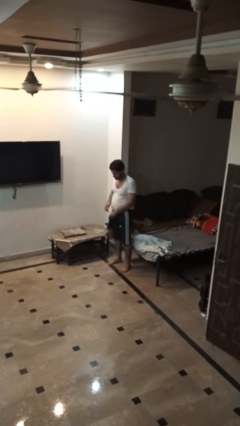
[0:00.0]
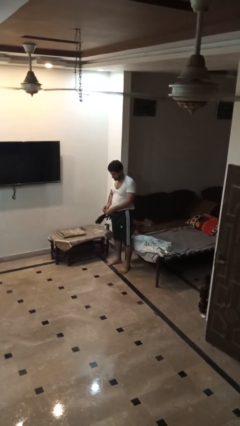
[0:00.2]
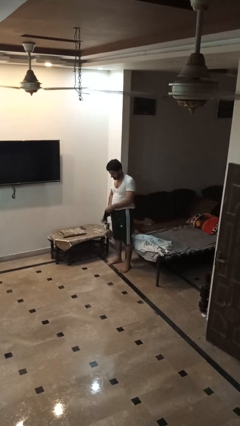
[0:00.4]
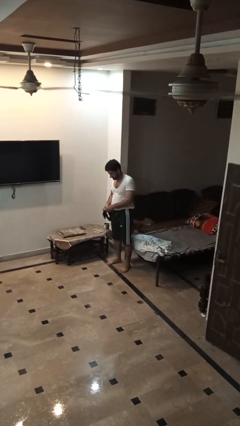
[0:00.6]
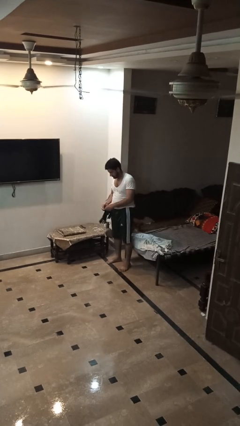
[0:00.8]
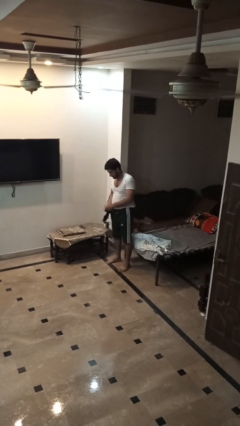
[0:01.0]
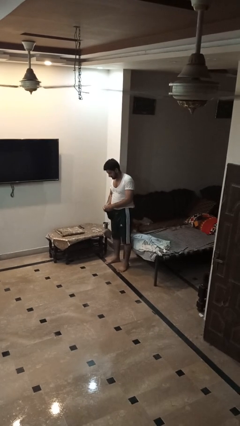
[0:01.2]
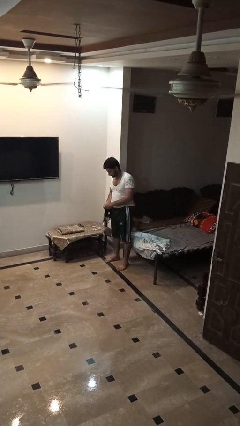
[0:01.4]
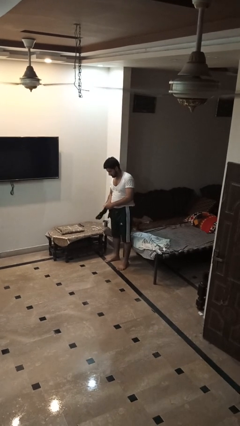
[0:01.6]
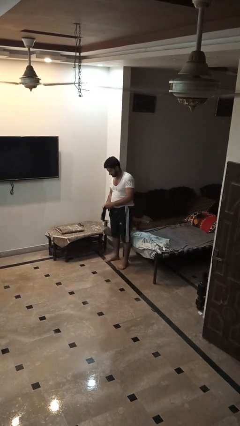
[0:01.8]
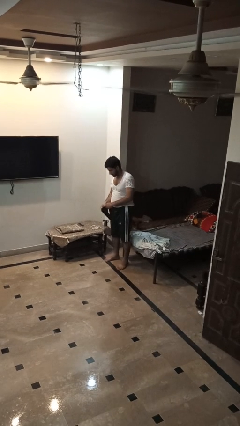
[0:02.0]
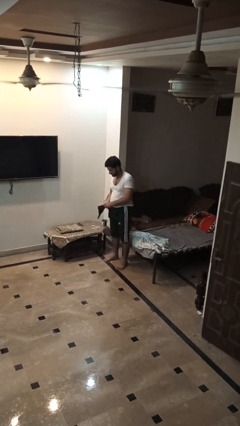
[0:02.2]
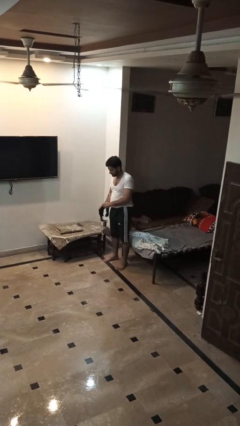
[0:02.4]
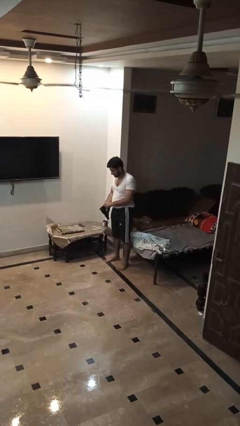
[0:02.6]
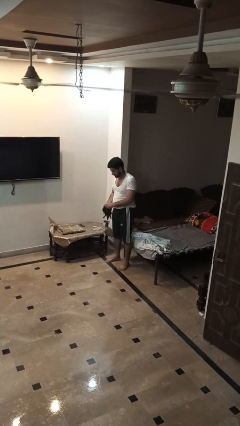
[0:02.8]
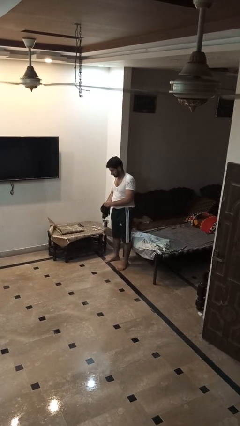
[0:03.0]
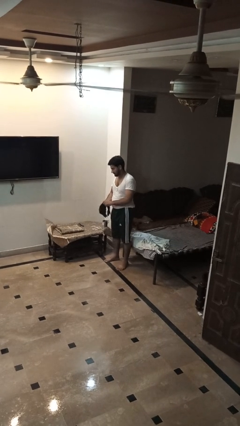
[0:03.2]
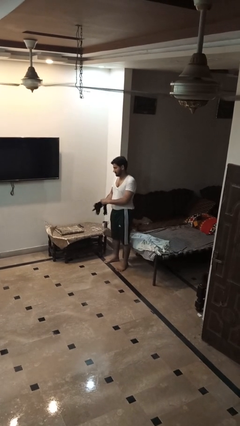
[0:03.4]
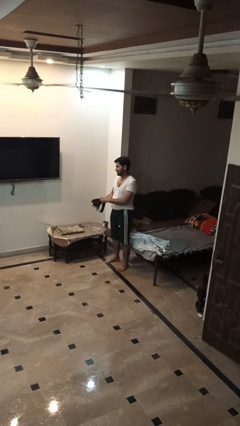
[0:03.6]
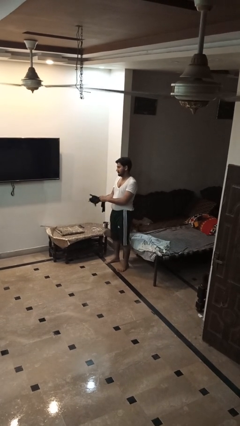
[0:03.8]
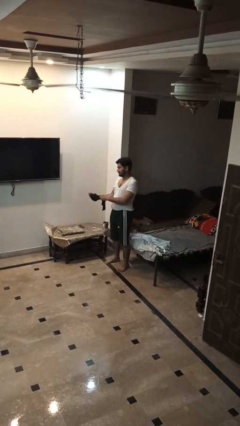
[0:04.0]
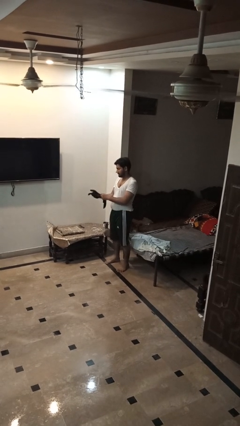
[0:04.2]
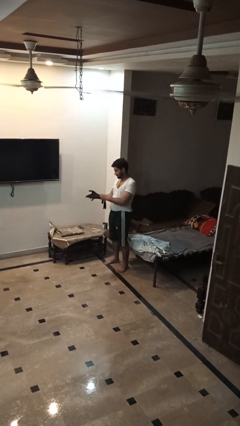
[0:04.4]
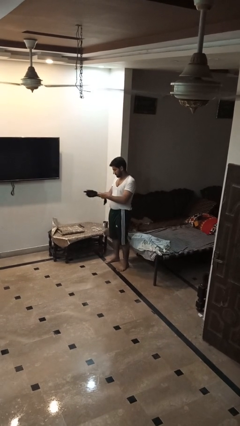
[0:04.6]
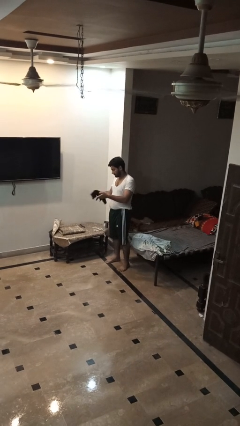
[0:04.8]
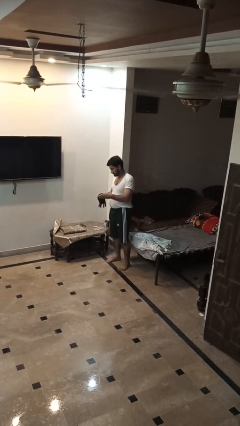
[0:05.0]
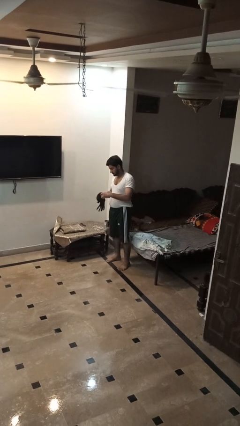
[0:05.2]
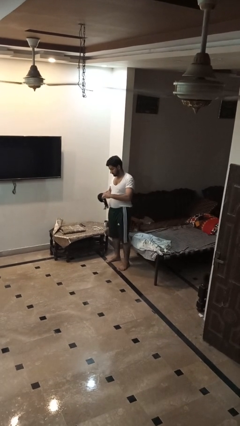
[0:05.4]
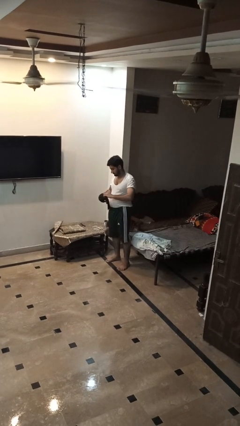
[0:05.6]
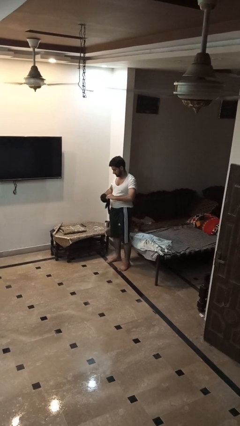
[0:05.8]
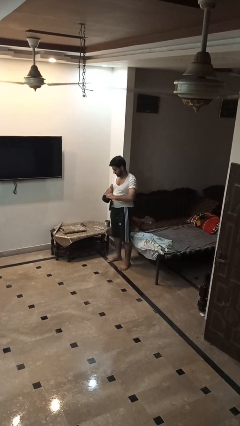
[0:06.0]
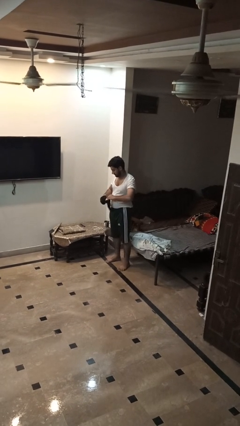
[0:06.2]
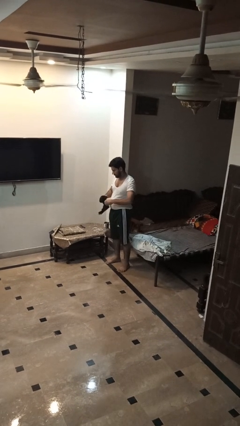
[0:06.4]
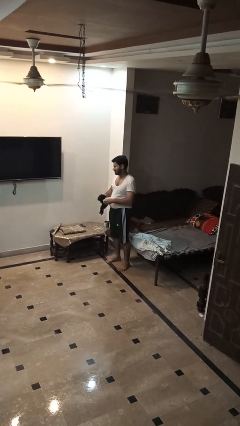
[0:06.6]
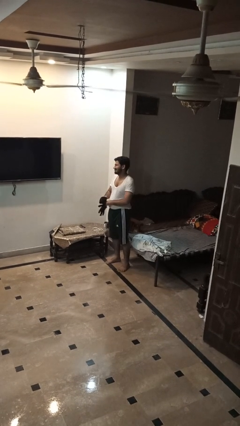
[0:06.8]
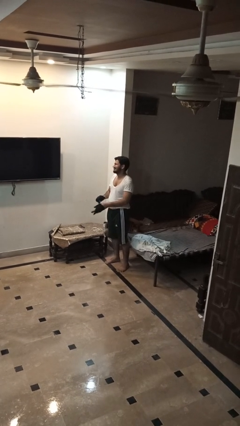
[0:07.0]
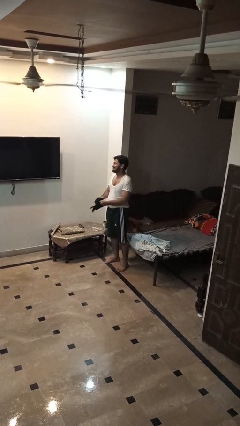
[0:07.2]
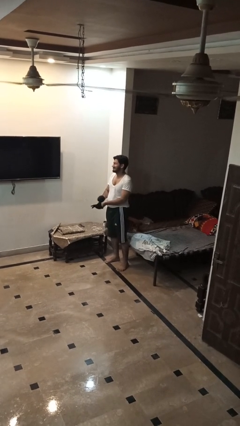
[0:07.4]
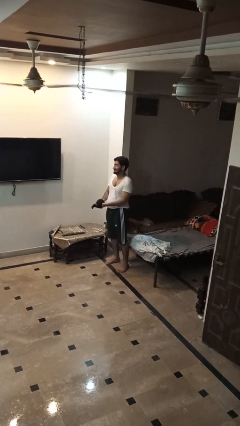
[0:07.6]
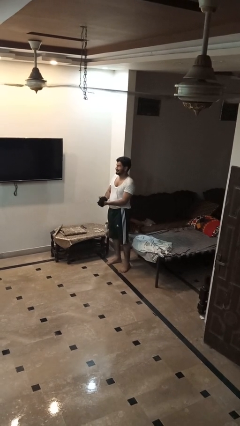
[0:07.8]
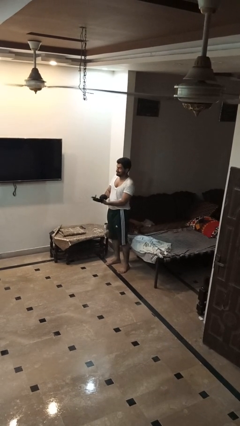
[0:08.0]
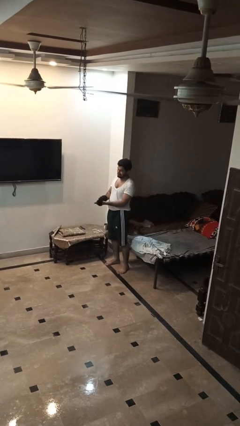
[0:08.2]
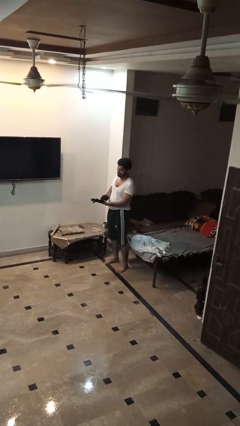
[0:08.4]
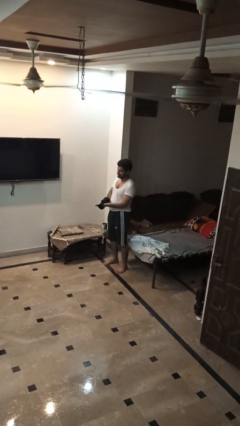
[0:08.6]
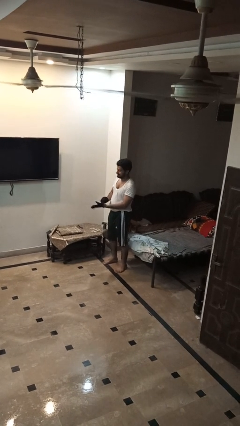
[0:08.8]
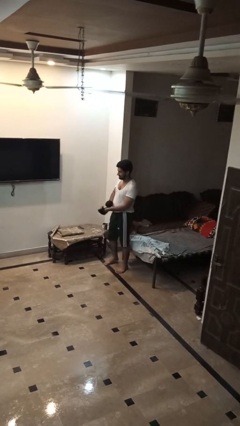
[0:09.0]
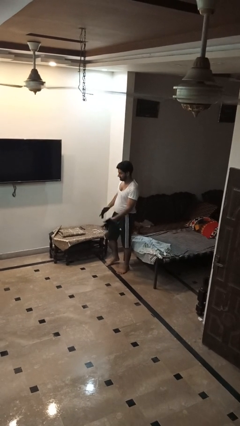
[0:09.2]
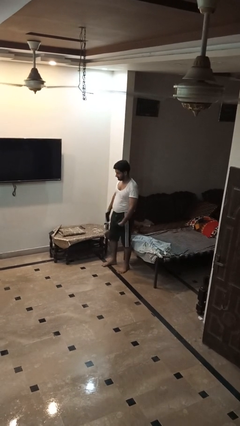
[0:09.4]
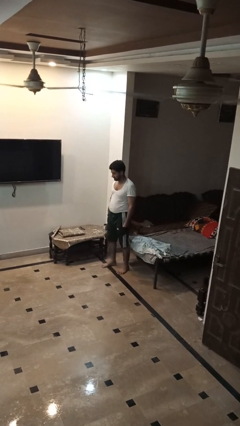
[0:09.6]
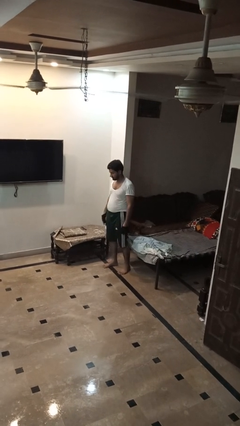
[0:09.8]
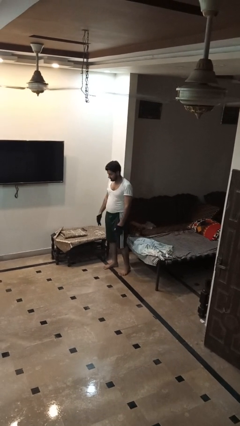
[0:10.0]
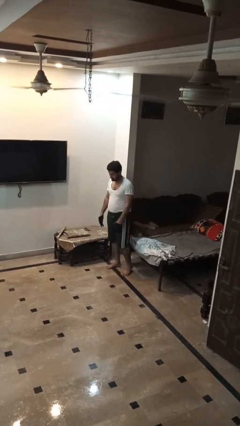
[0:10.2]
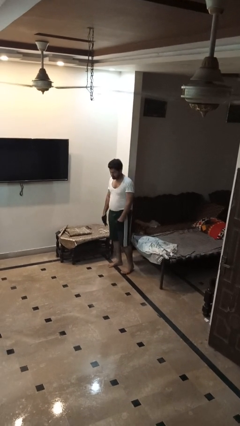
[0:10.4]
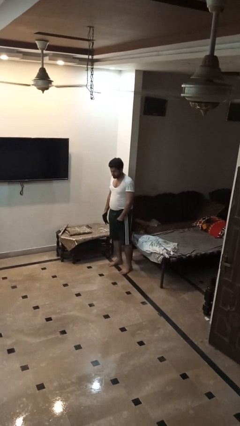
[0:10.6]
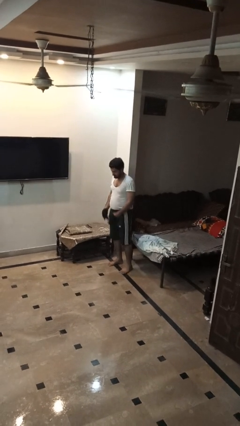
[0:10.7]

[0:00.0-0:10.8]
person puts on gloves

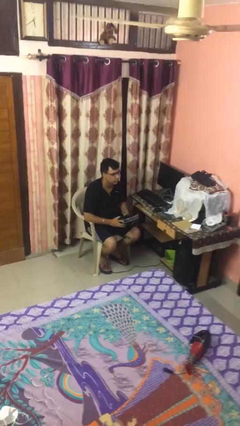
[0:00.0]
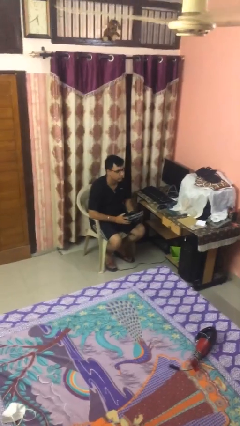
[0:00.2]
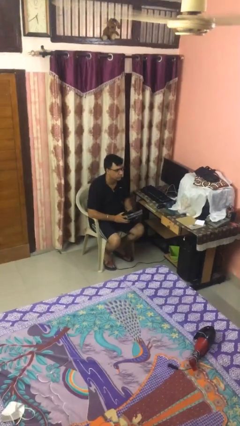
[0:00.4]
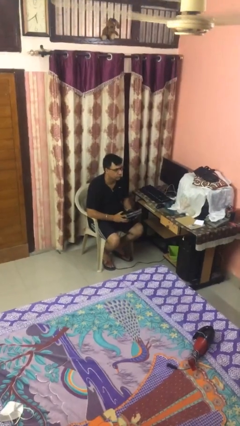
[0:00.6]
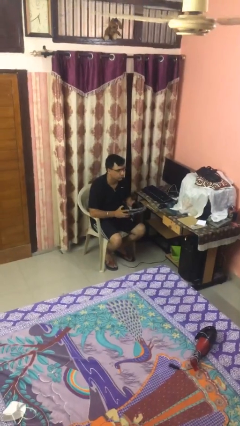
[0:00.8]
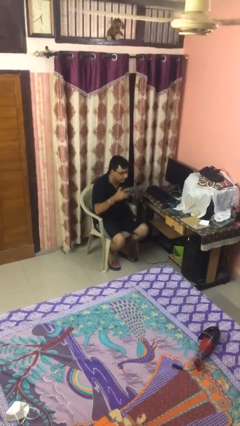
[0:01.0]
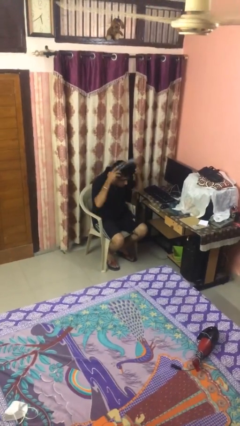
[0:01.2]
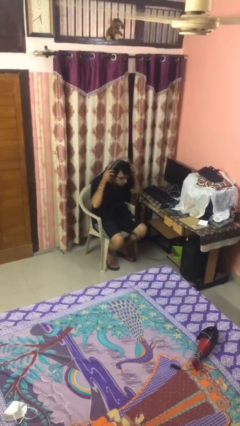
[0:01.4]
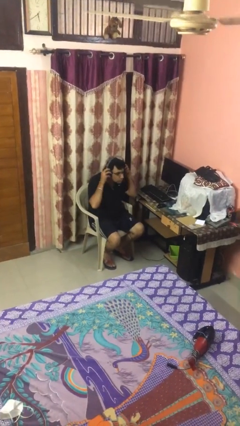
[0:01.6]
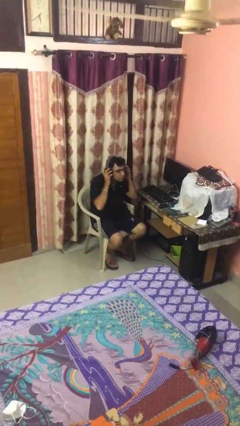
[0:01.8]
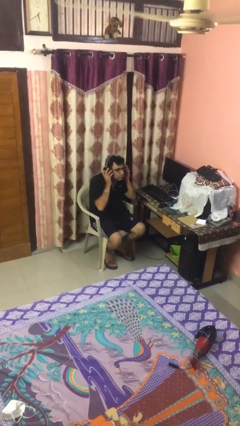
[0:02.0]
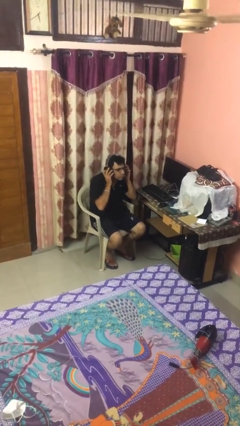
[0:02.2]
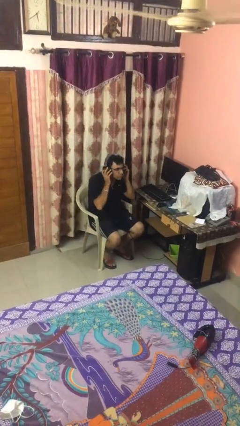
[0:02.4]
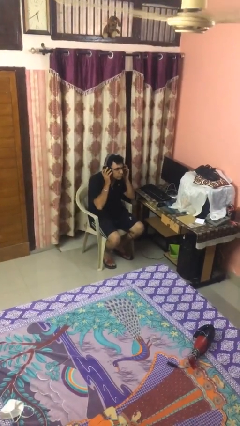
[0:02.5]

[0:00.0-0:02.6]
person puts on headphones

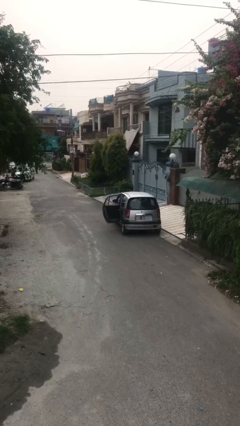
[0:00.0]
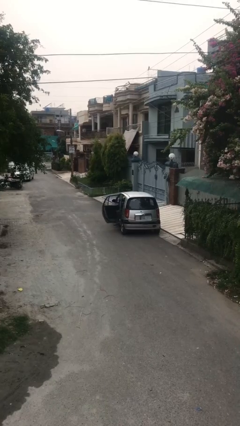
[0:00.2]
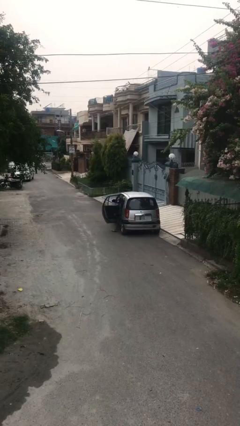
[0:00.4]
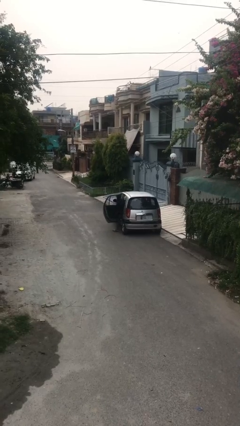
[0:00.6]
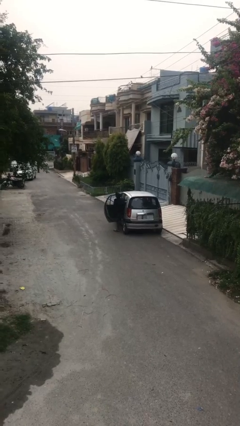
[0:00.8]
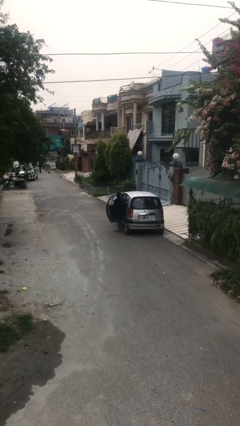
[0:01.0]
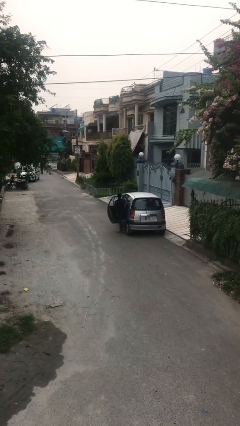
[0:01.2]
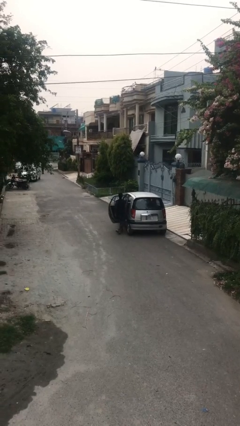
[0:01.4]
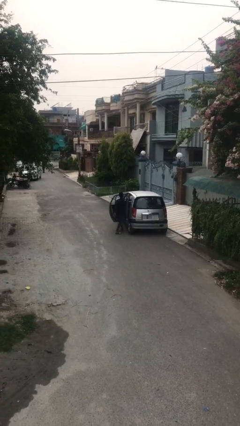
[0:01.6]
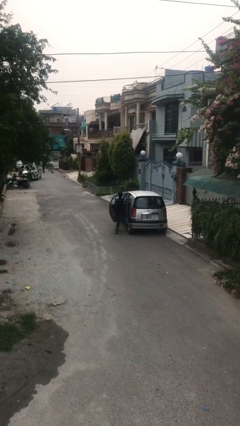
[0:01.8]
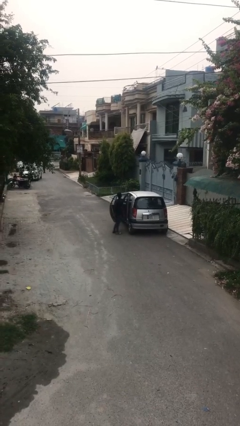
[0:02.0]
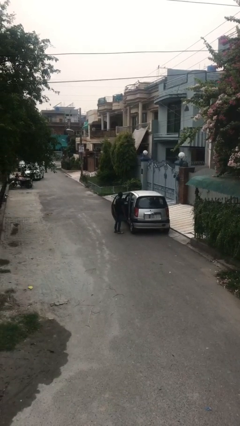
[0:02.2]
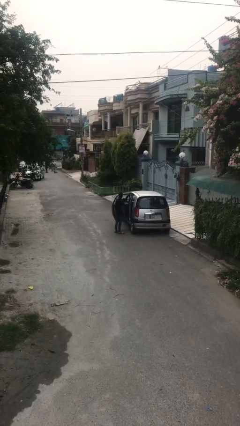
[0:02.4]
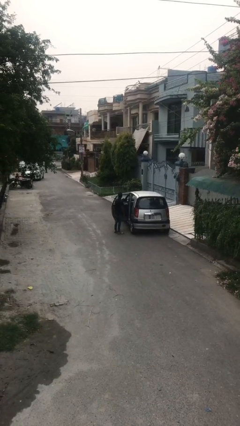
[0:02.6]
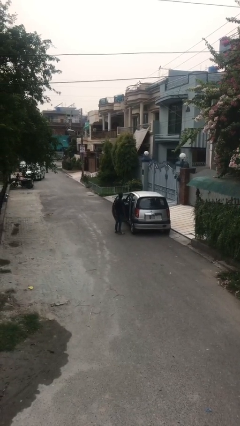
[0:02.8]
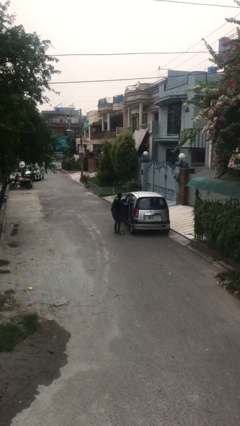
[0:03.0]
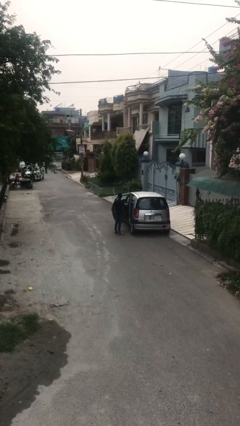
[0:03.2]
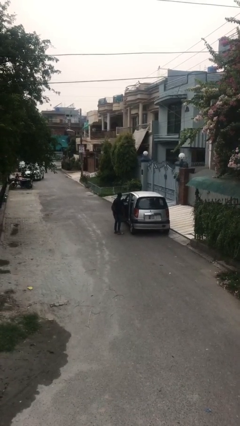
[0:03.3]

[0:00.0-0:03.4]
person exits car

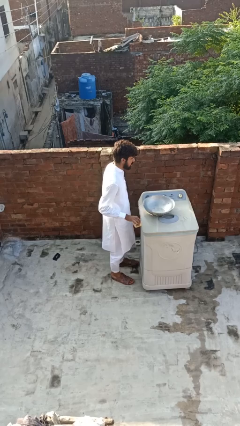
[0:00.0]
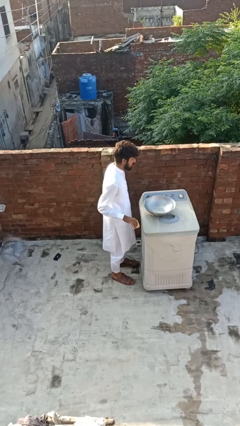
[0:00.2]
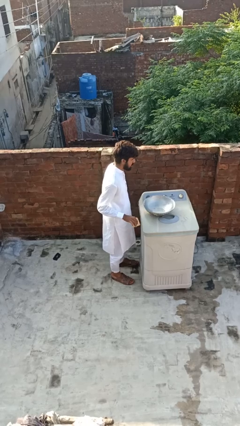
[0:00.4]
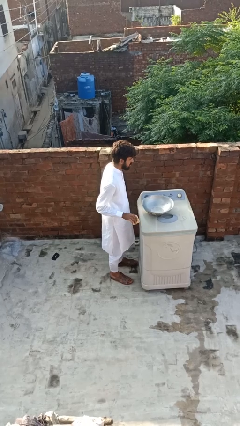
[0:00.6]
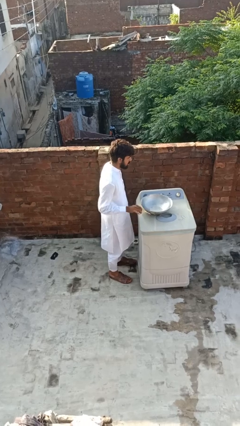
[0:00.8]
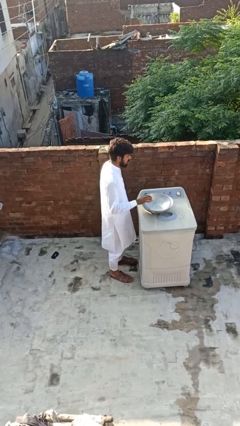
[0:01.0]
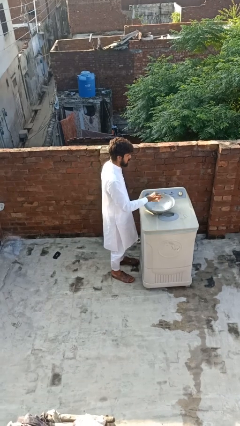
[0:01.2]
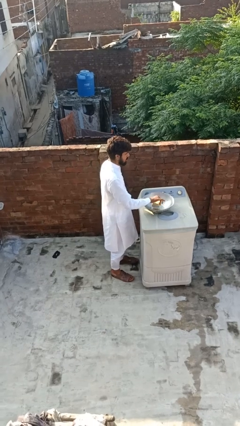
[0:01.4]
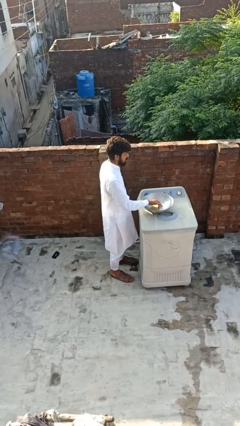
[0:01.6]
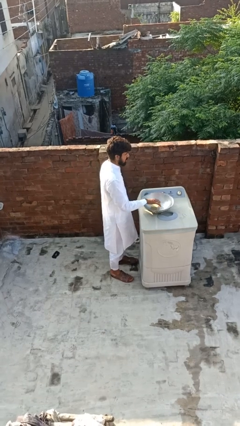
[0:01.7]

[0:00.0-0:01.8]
person pours into bowl
